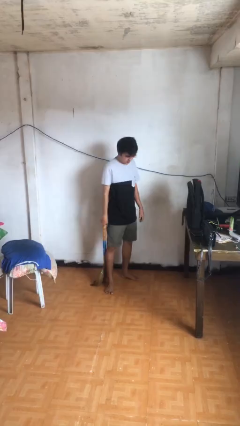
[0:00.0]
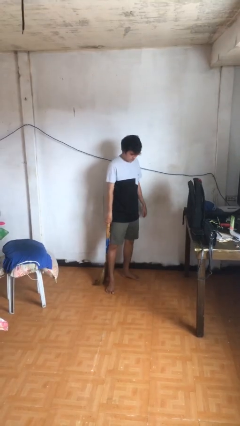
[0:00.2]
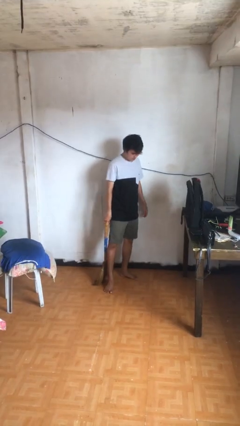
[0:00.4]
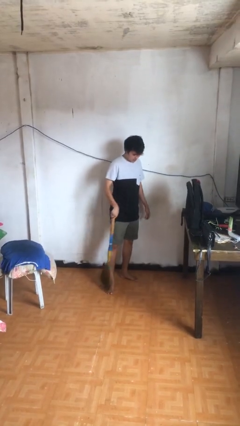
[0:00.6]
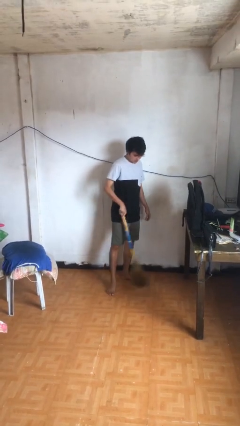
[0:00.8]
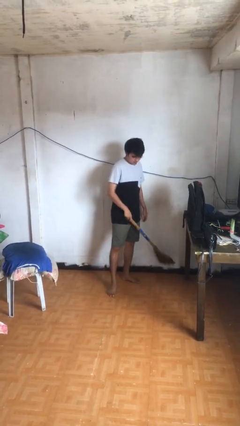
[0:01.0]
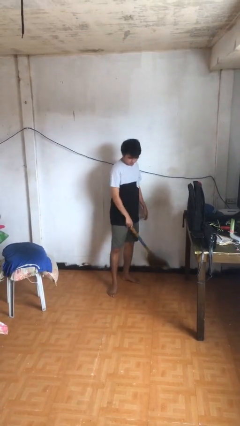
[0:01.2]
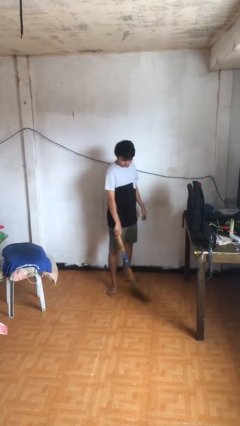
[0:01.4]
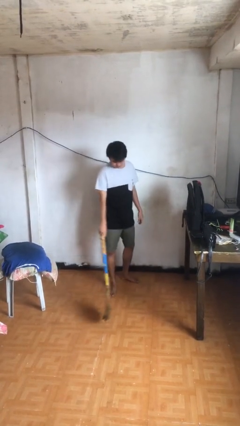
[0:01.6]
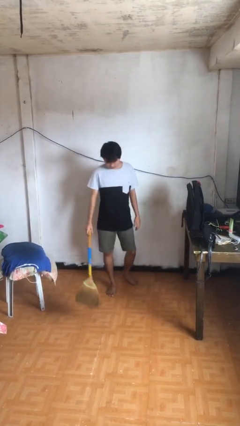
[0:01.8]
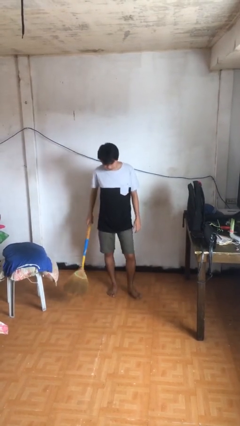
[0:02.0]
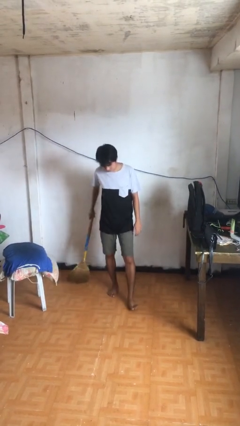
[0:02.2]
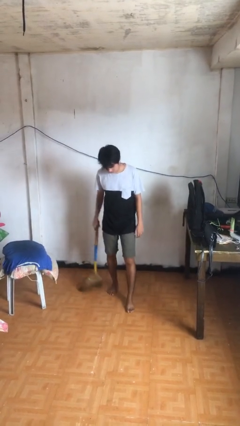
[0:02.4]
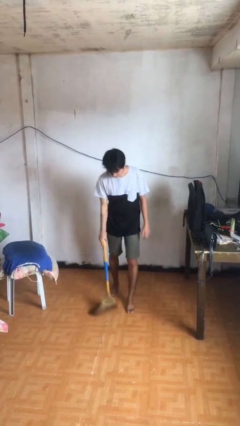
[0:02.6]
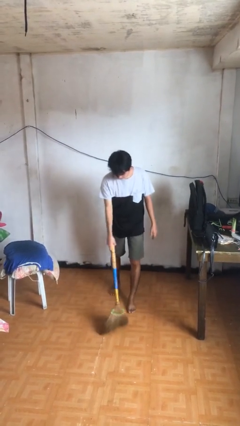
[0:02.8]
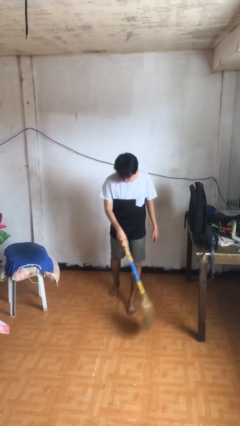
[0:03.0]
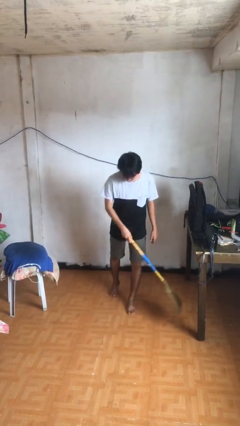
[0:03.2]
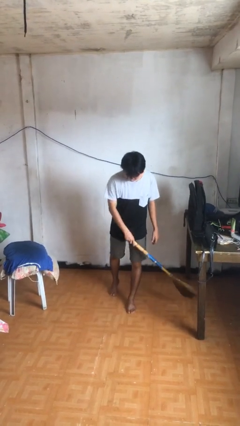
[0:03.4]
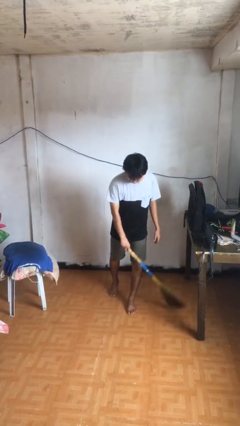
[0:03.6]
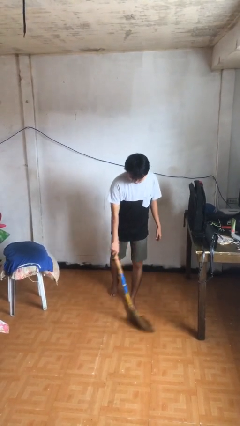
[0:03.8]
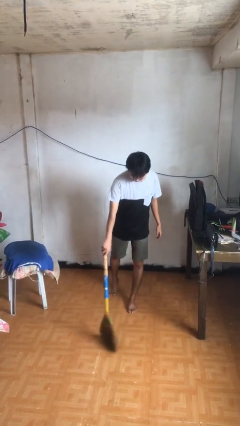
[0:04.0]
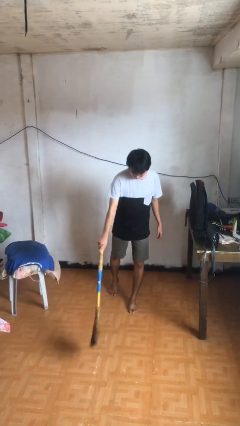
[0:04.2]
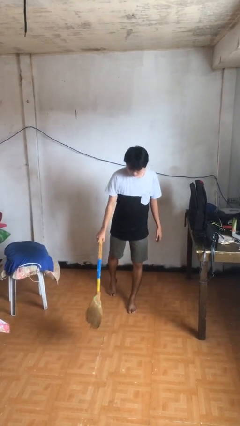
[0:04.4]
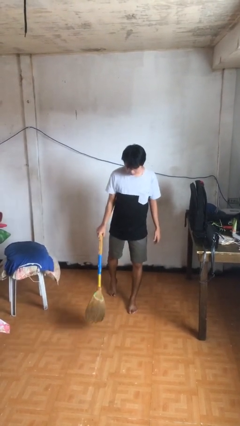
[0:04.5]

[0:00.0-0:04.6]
person sweeps floor

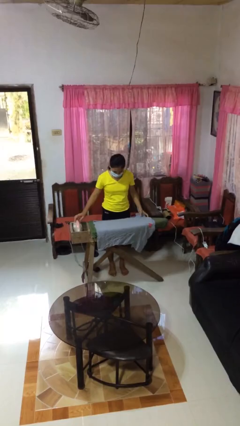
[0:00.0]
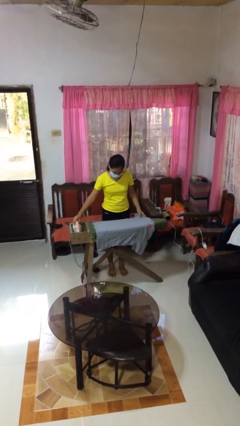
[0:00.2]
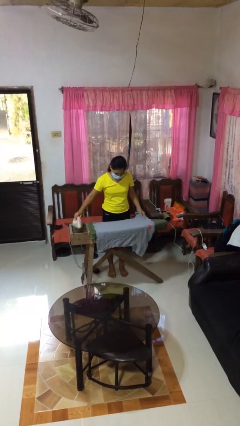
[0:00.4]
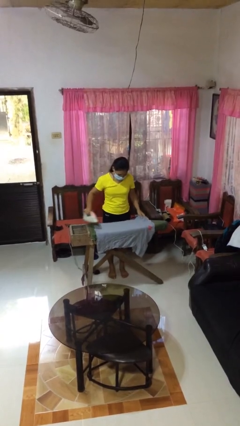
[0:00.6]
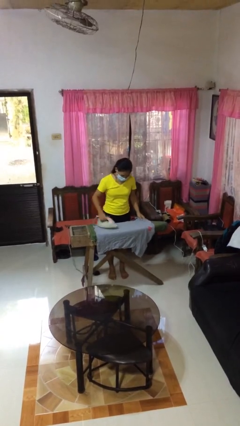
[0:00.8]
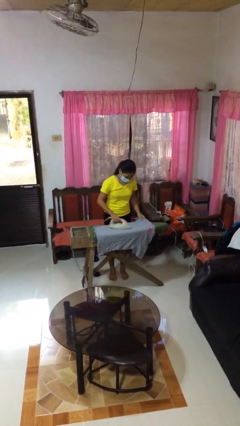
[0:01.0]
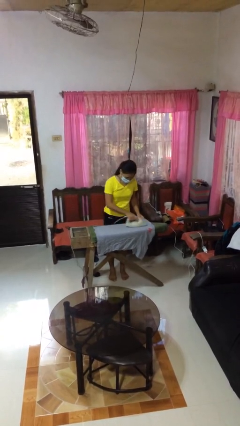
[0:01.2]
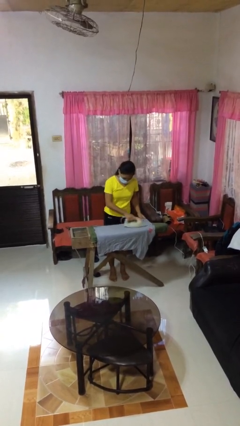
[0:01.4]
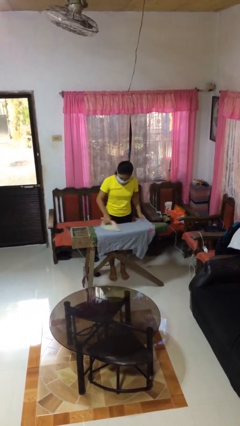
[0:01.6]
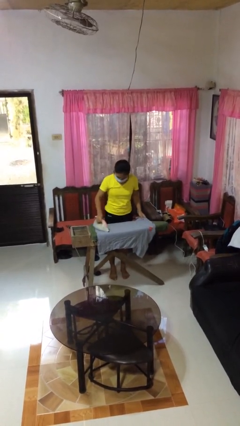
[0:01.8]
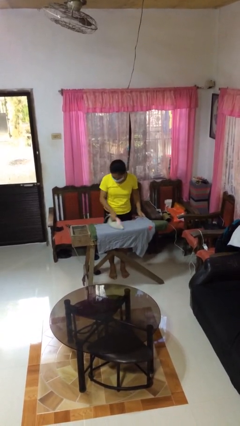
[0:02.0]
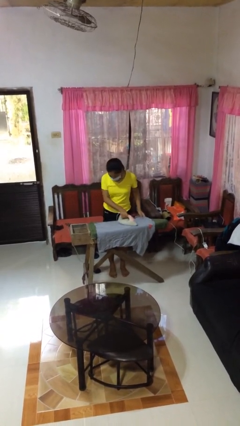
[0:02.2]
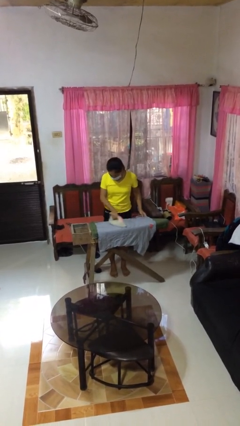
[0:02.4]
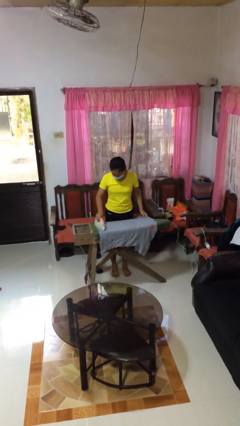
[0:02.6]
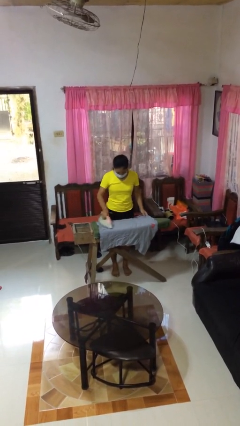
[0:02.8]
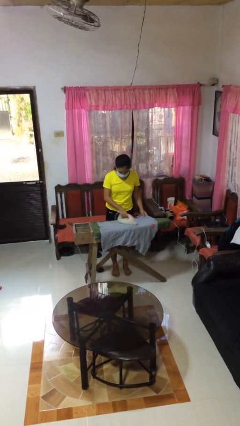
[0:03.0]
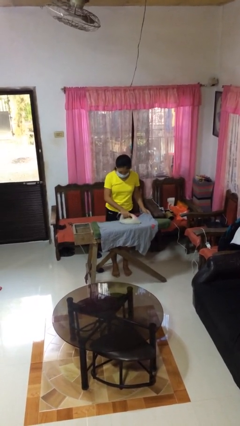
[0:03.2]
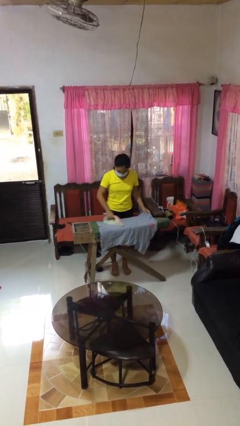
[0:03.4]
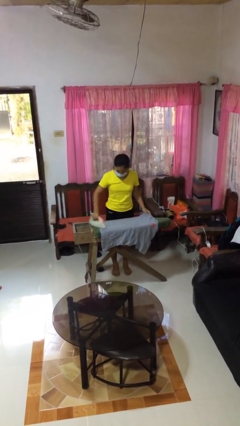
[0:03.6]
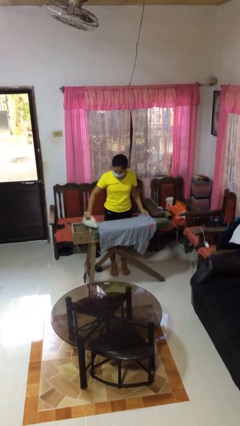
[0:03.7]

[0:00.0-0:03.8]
person irons clothes

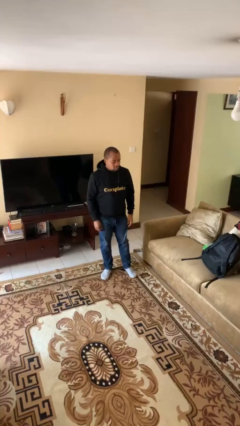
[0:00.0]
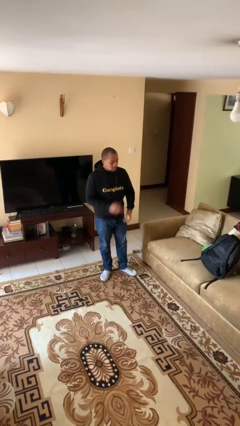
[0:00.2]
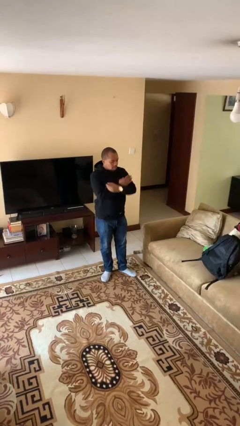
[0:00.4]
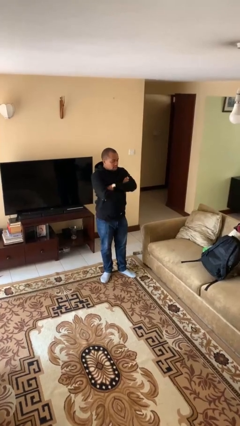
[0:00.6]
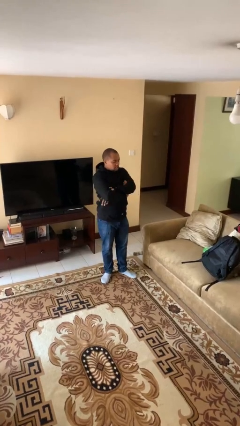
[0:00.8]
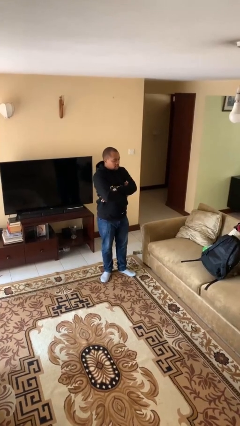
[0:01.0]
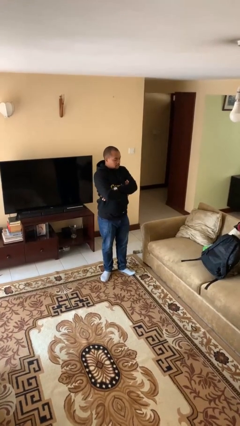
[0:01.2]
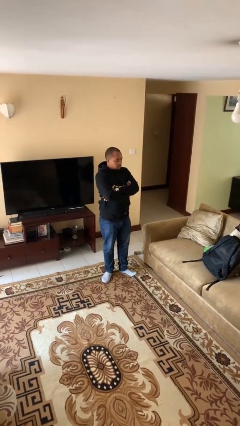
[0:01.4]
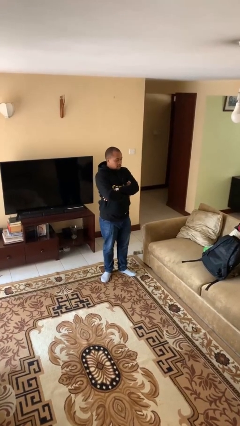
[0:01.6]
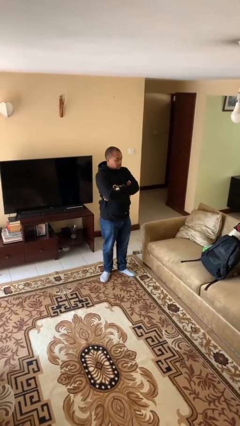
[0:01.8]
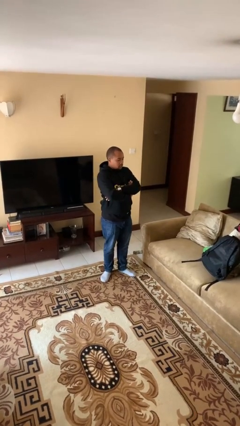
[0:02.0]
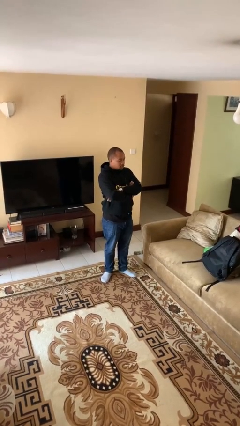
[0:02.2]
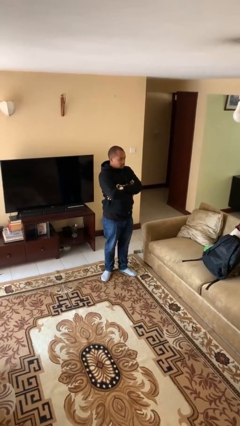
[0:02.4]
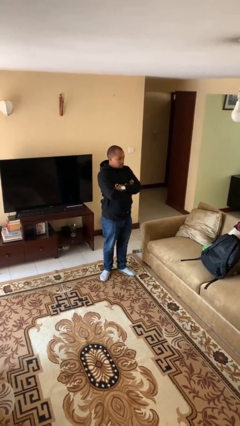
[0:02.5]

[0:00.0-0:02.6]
person crosses arms

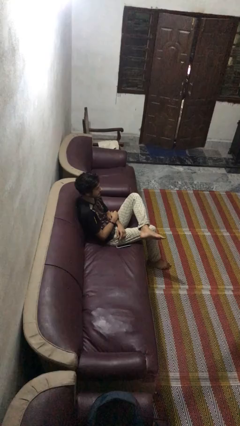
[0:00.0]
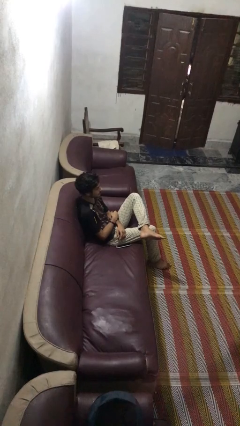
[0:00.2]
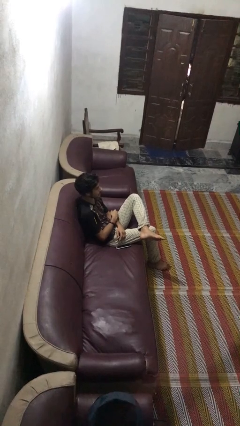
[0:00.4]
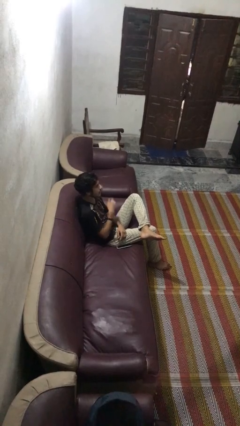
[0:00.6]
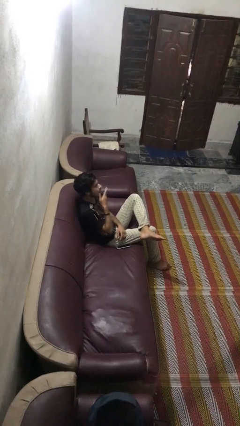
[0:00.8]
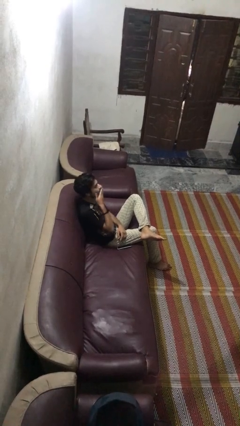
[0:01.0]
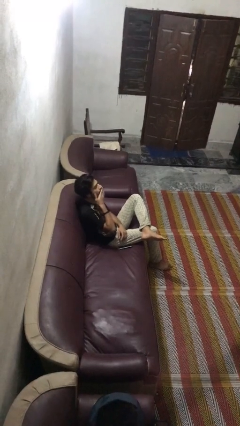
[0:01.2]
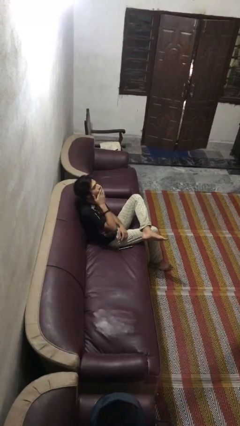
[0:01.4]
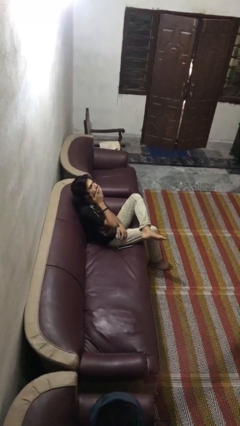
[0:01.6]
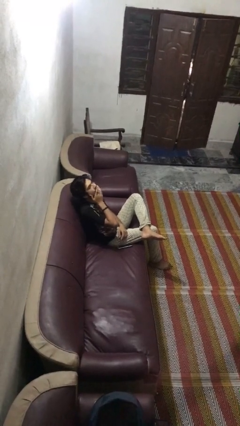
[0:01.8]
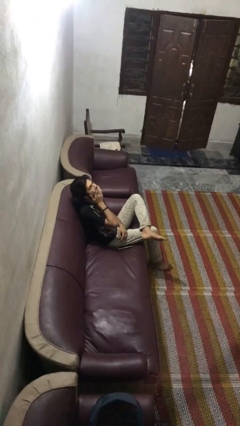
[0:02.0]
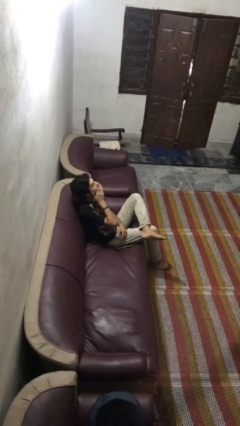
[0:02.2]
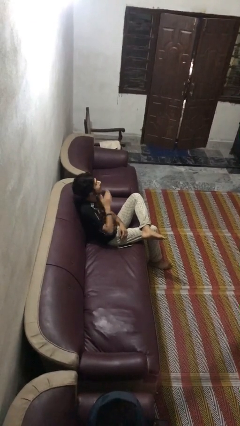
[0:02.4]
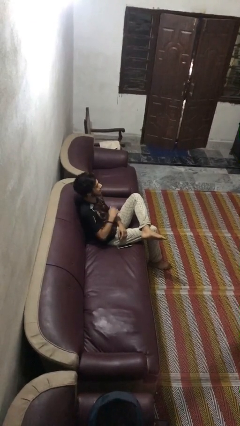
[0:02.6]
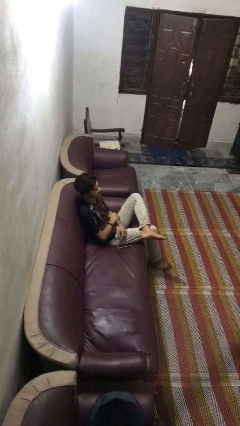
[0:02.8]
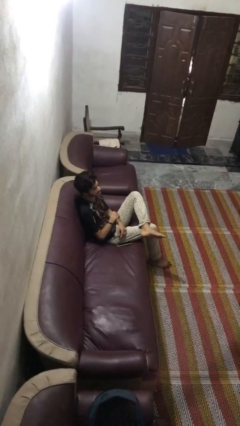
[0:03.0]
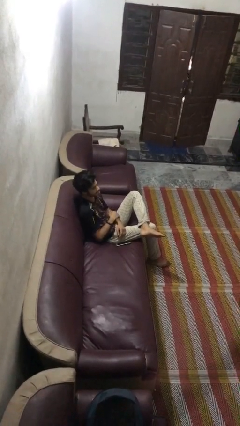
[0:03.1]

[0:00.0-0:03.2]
person yawns

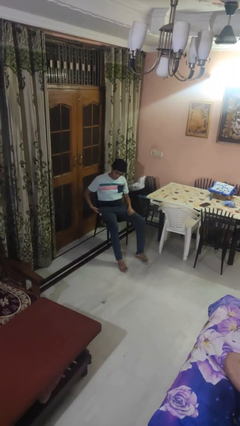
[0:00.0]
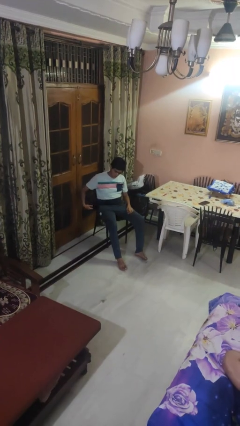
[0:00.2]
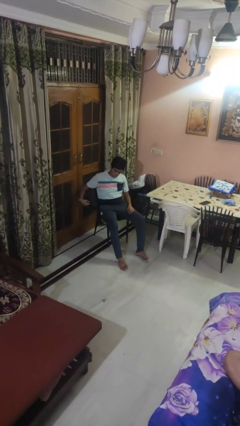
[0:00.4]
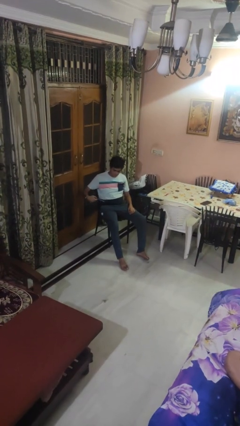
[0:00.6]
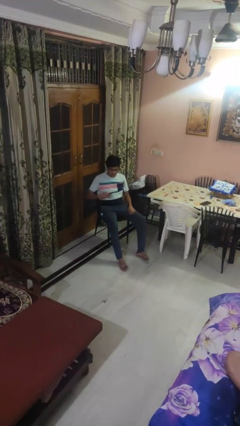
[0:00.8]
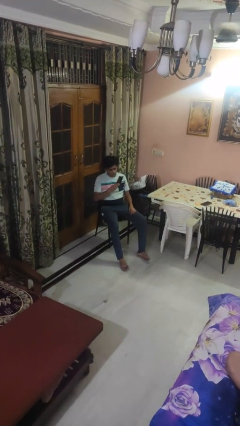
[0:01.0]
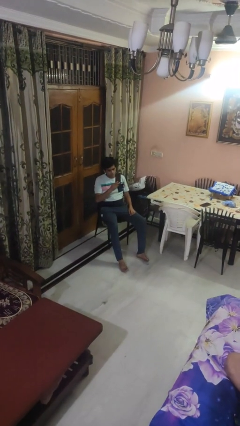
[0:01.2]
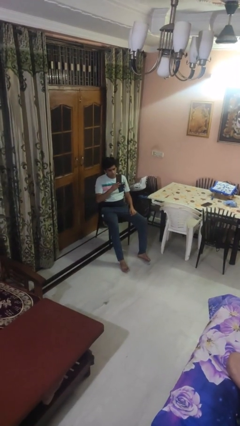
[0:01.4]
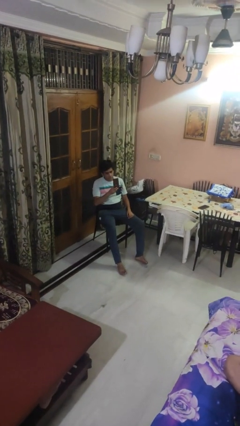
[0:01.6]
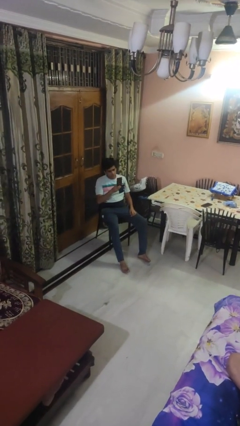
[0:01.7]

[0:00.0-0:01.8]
person takes phone from pocket

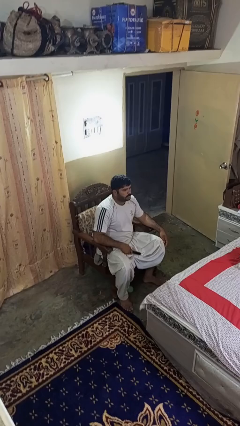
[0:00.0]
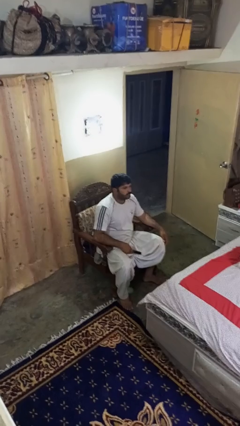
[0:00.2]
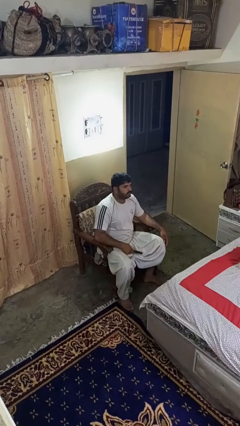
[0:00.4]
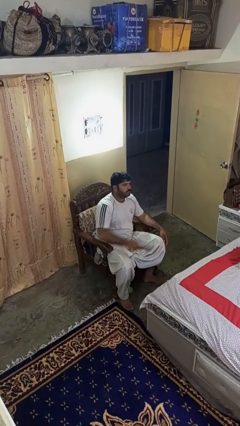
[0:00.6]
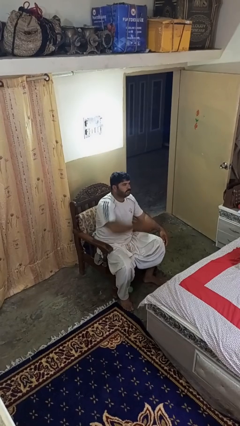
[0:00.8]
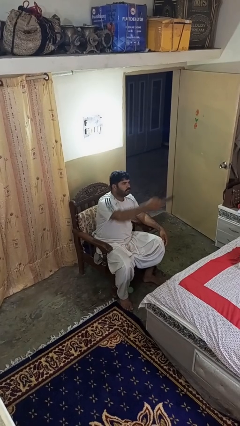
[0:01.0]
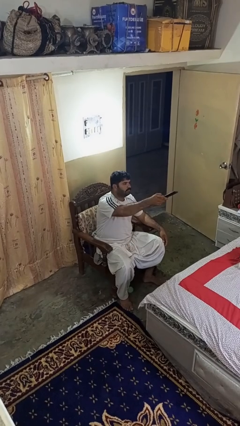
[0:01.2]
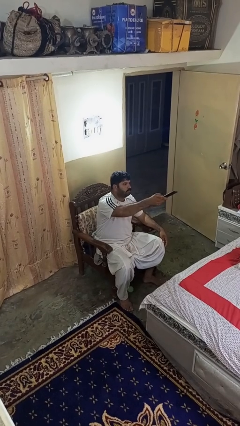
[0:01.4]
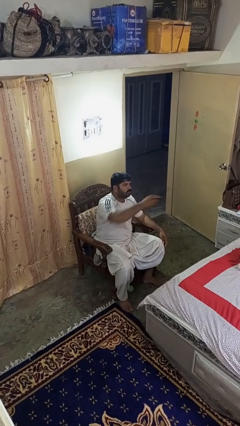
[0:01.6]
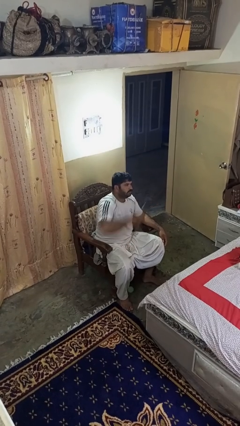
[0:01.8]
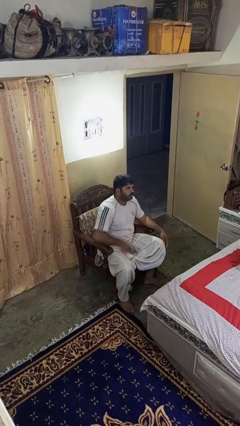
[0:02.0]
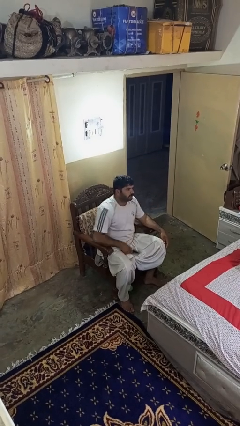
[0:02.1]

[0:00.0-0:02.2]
person uses television remote
